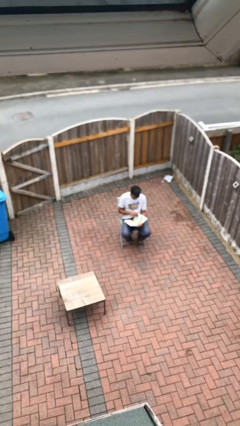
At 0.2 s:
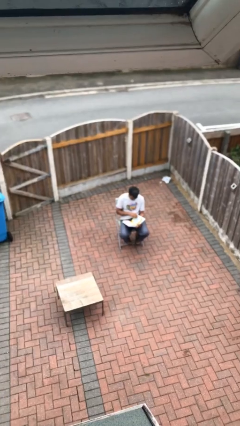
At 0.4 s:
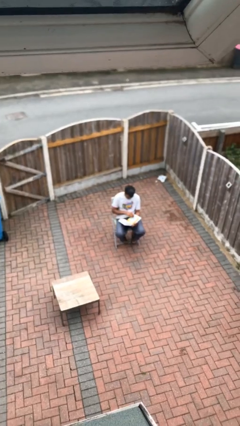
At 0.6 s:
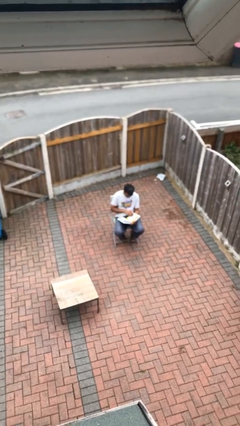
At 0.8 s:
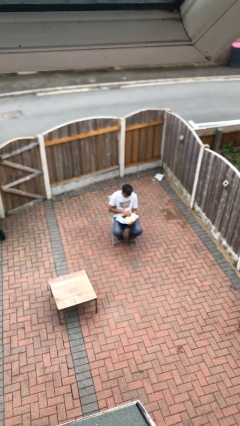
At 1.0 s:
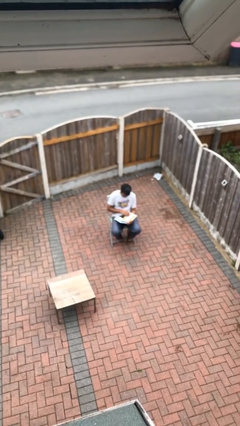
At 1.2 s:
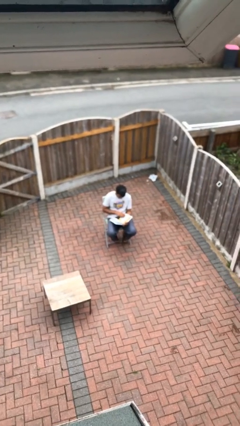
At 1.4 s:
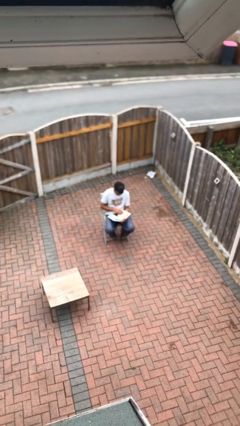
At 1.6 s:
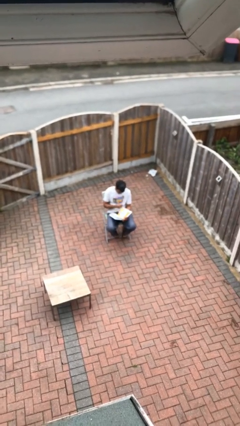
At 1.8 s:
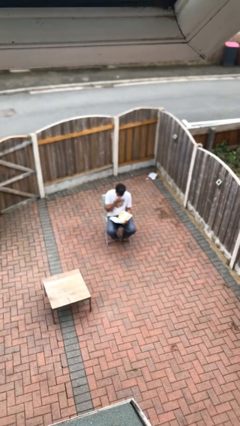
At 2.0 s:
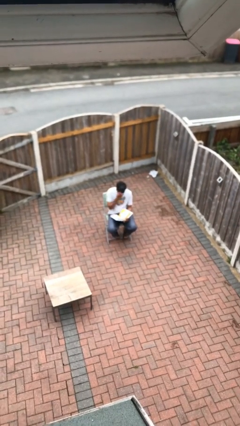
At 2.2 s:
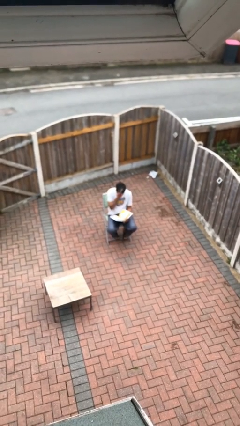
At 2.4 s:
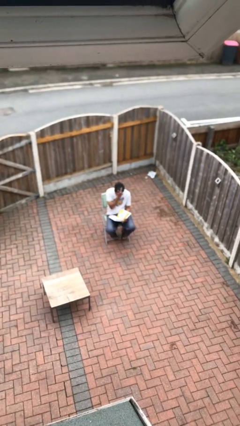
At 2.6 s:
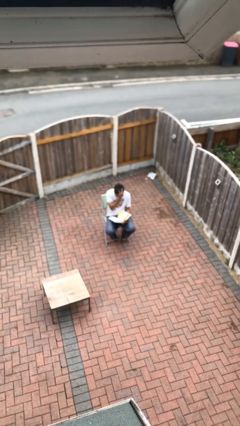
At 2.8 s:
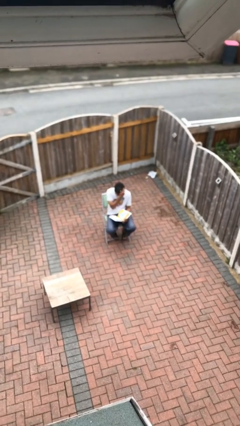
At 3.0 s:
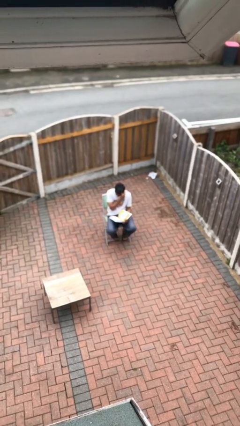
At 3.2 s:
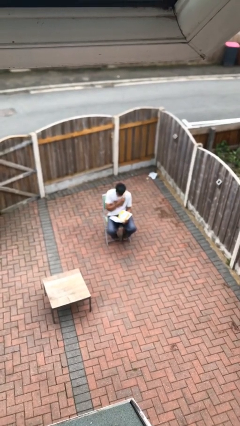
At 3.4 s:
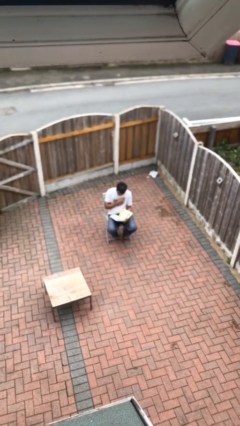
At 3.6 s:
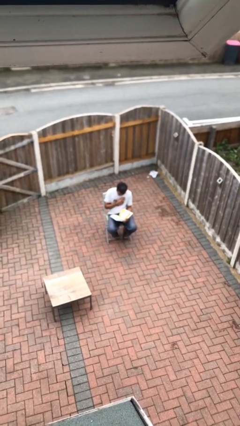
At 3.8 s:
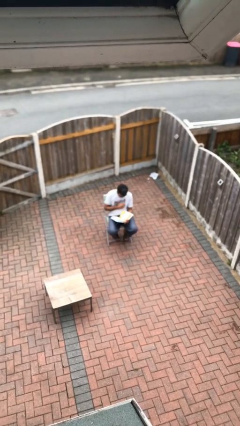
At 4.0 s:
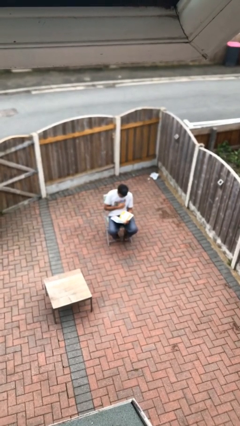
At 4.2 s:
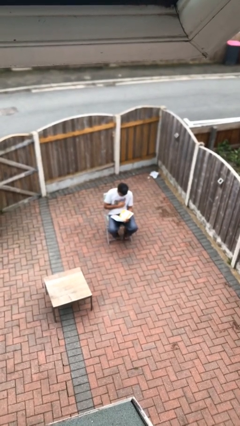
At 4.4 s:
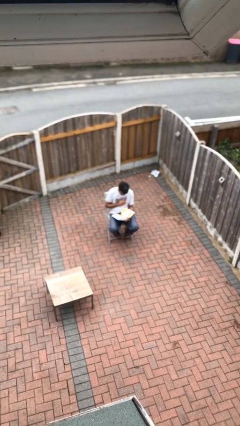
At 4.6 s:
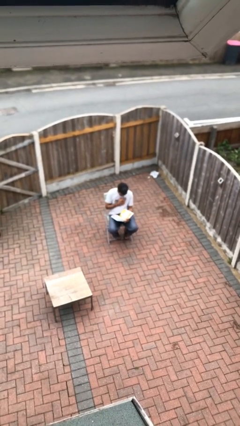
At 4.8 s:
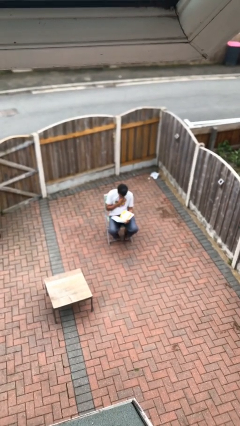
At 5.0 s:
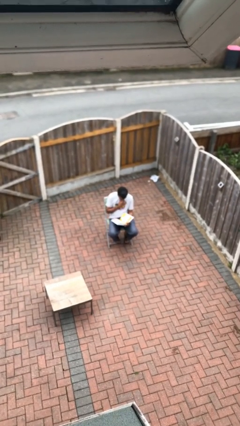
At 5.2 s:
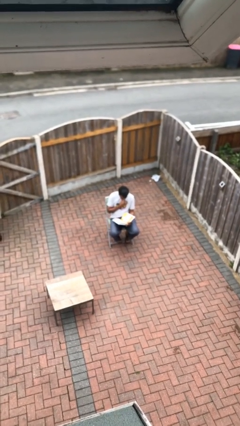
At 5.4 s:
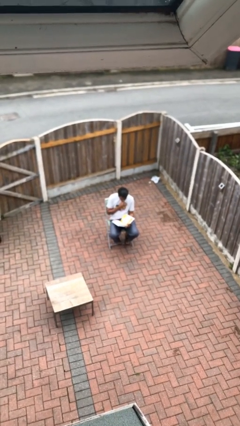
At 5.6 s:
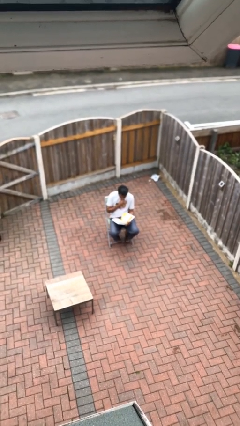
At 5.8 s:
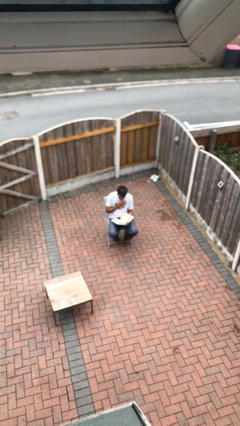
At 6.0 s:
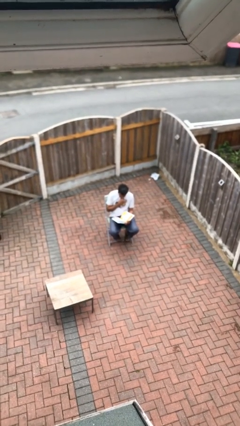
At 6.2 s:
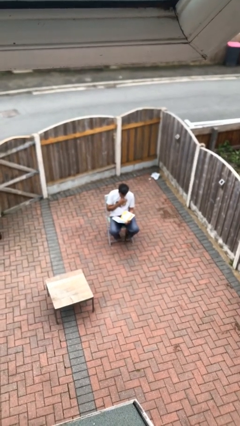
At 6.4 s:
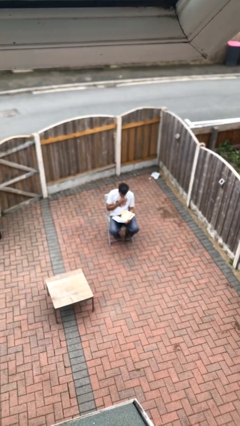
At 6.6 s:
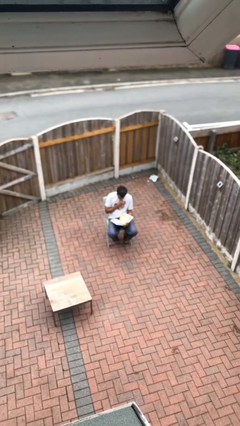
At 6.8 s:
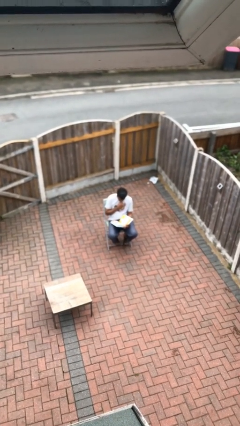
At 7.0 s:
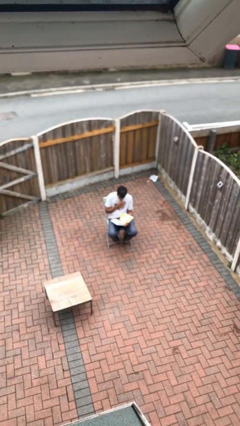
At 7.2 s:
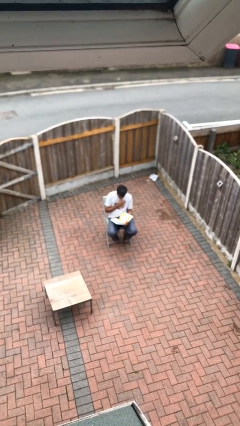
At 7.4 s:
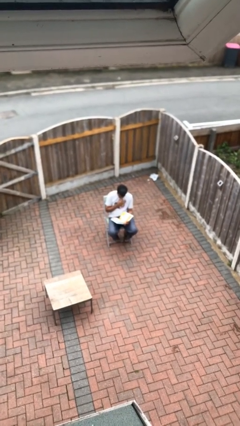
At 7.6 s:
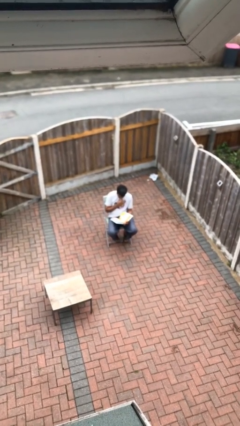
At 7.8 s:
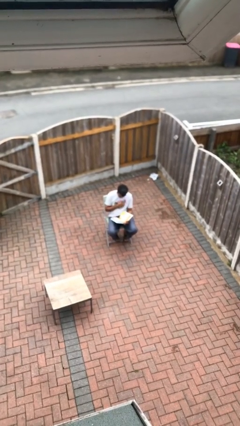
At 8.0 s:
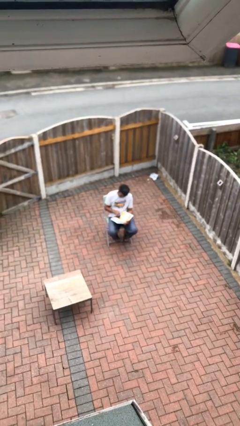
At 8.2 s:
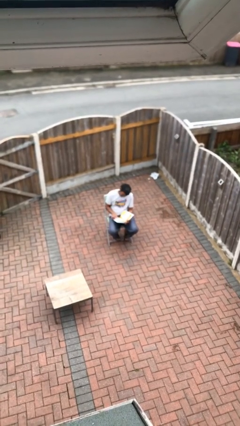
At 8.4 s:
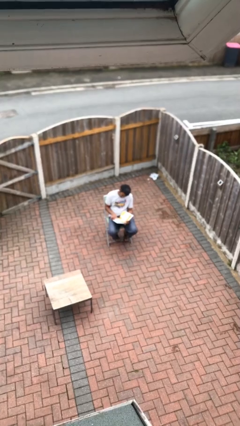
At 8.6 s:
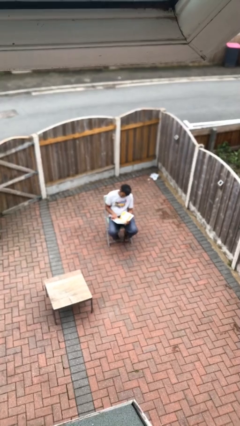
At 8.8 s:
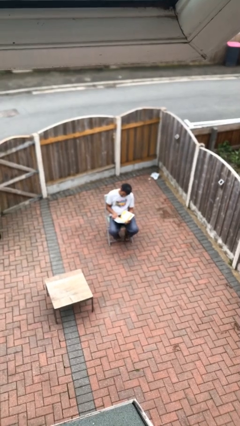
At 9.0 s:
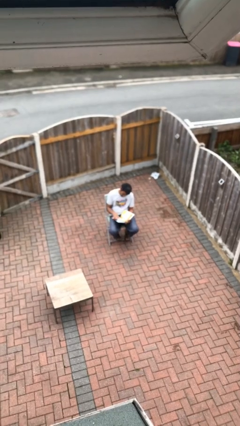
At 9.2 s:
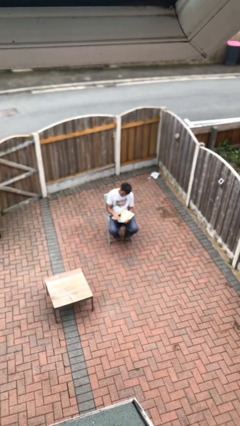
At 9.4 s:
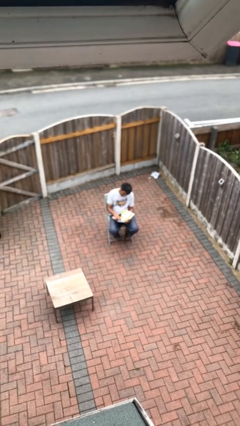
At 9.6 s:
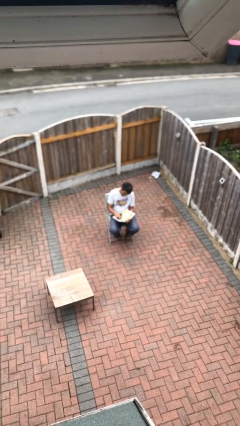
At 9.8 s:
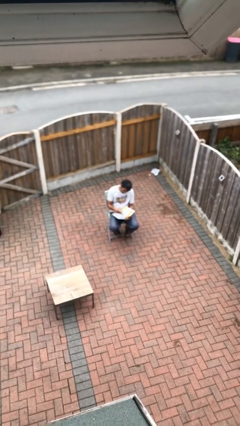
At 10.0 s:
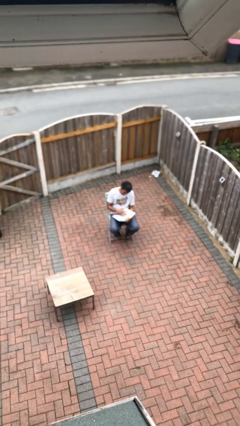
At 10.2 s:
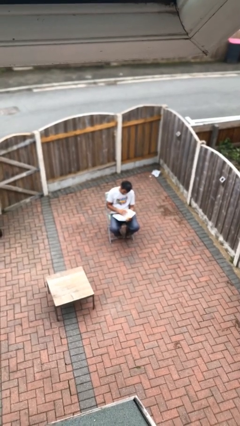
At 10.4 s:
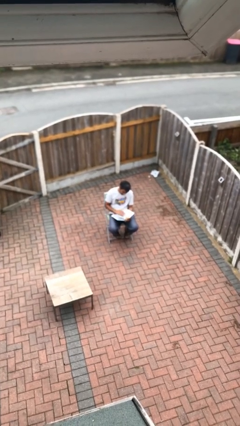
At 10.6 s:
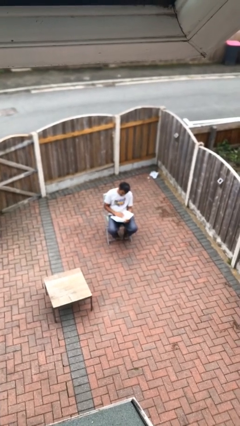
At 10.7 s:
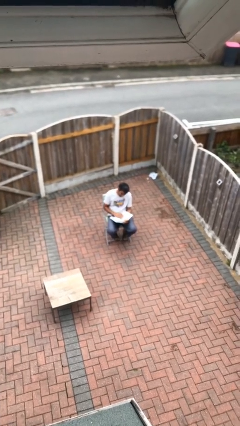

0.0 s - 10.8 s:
person reads document

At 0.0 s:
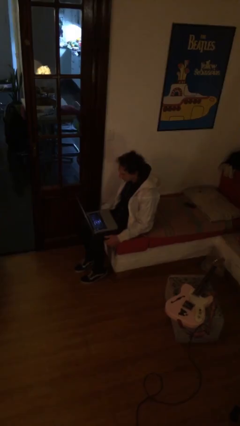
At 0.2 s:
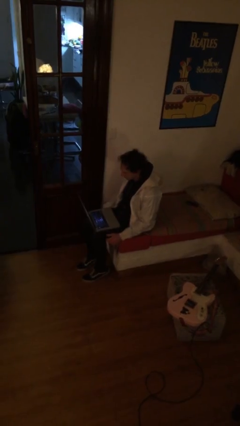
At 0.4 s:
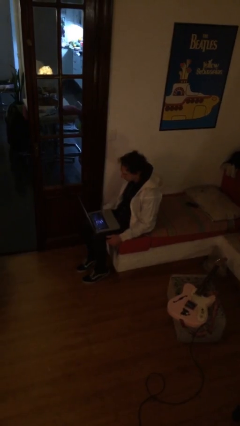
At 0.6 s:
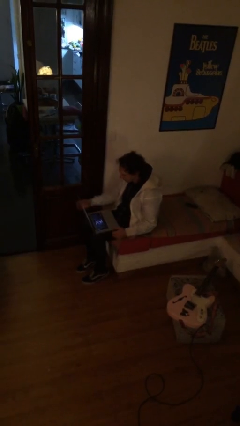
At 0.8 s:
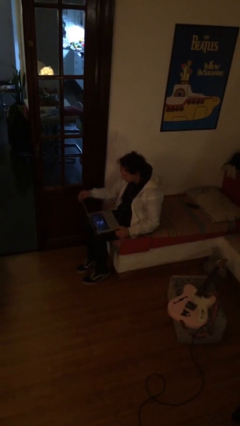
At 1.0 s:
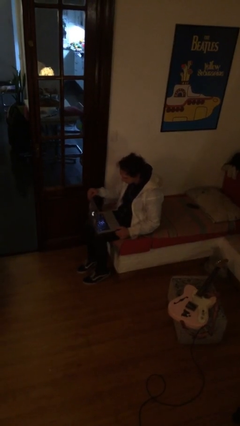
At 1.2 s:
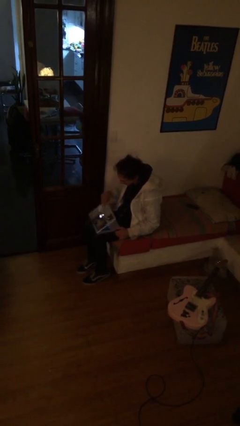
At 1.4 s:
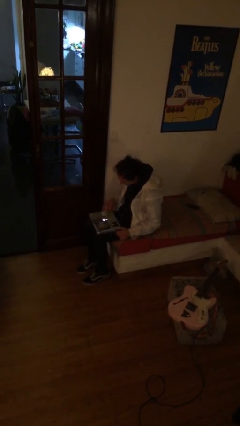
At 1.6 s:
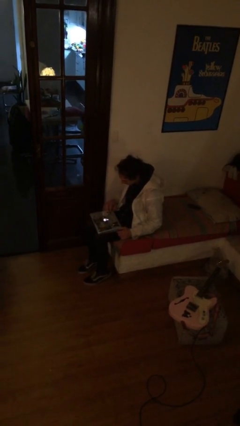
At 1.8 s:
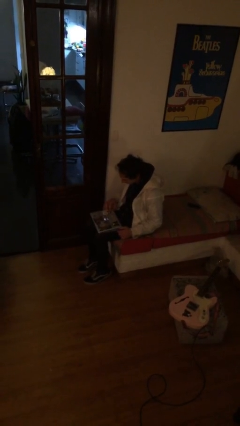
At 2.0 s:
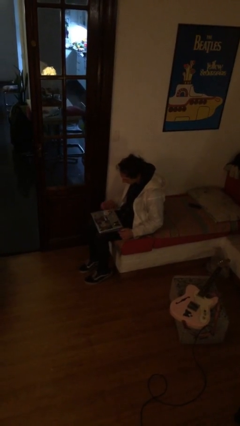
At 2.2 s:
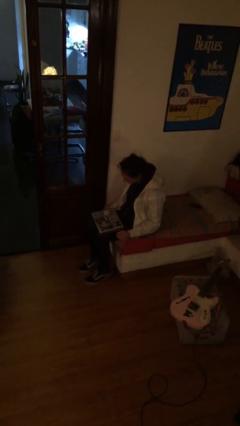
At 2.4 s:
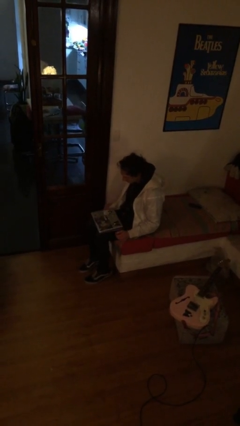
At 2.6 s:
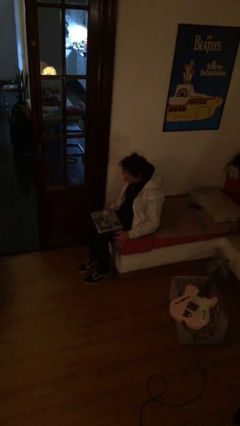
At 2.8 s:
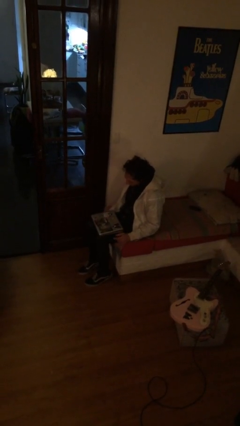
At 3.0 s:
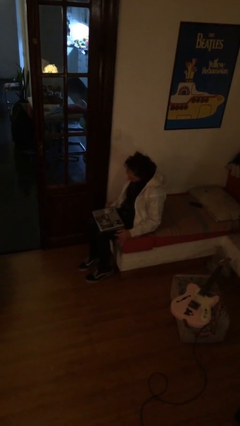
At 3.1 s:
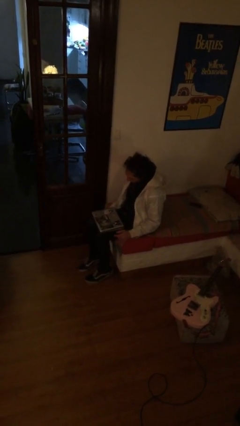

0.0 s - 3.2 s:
person closes laptop

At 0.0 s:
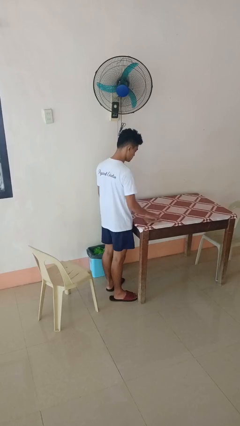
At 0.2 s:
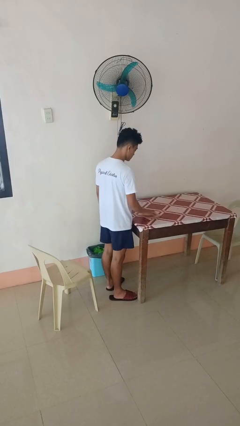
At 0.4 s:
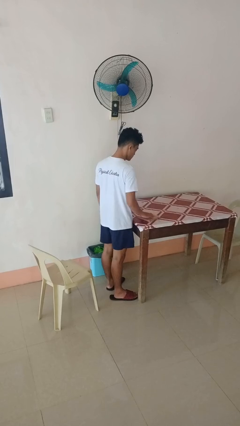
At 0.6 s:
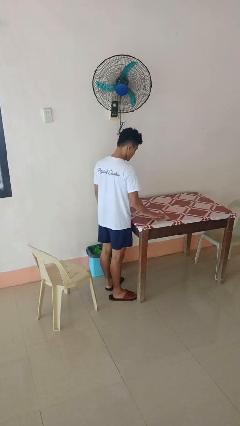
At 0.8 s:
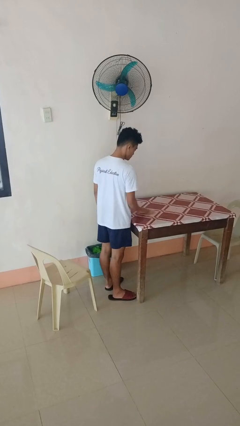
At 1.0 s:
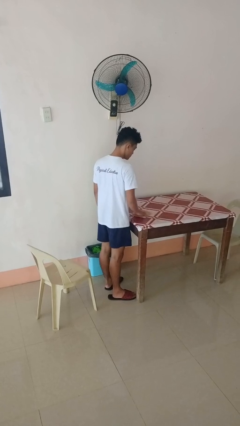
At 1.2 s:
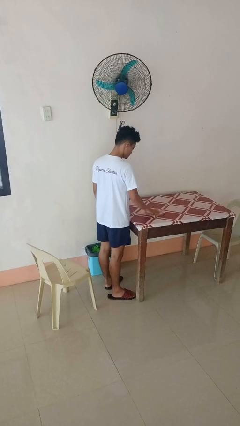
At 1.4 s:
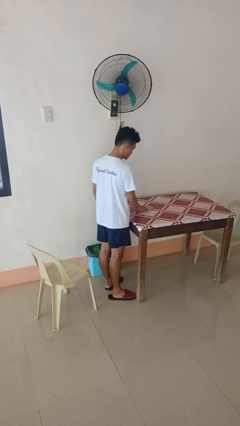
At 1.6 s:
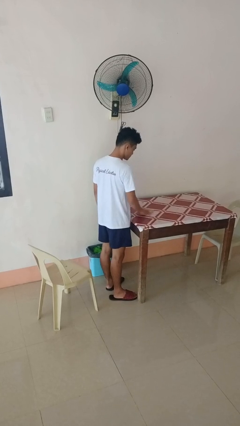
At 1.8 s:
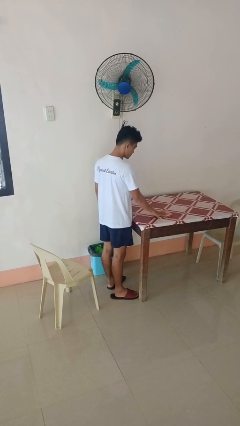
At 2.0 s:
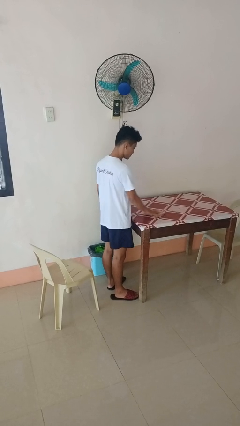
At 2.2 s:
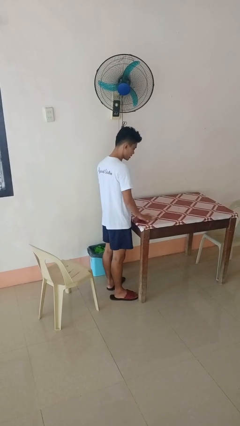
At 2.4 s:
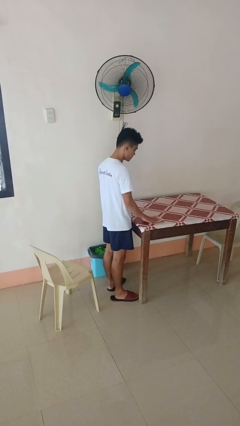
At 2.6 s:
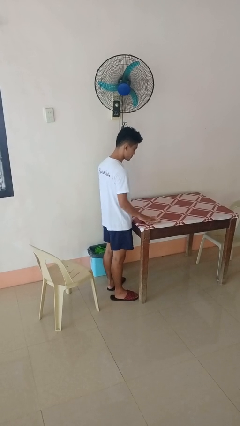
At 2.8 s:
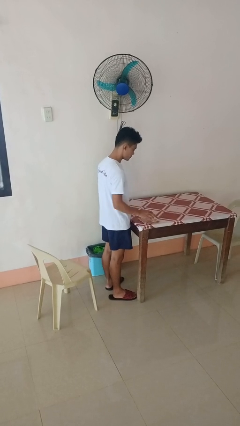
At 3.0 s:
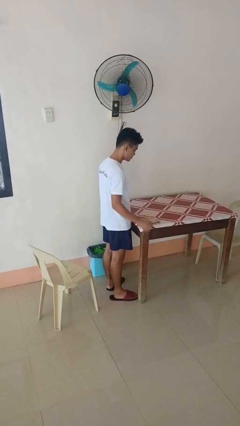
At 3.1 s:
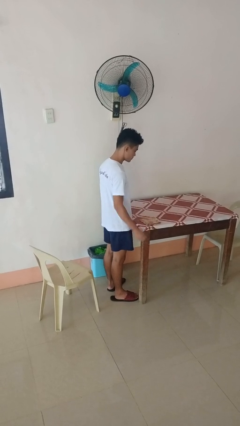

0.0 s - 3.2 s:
person cleans table with rag

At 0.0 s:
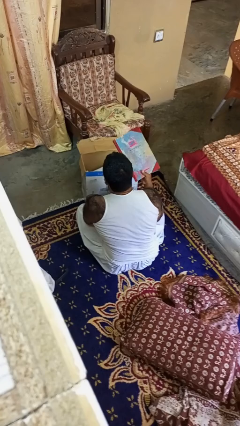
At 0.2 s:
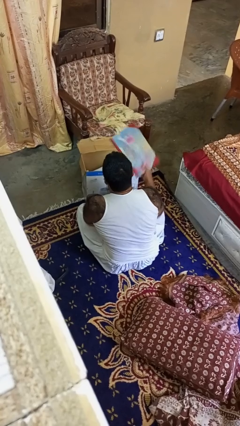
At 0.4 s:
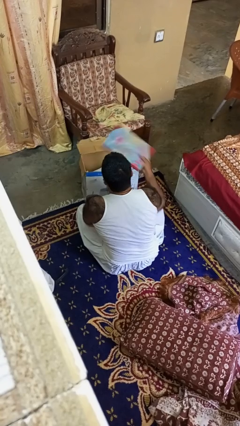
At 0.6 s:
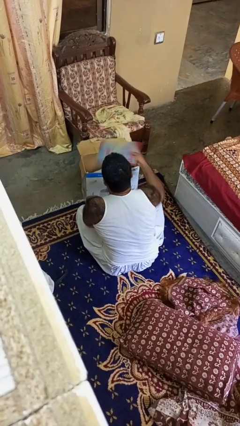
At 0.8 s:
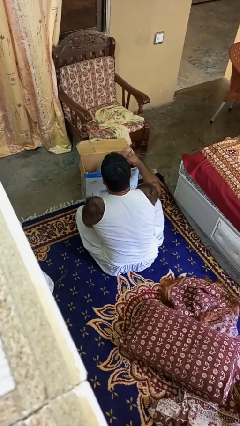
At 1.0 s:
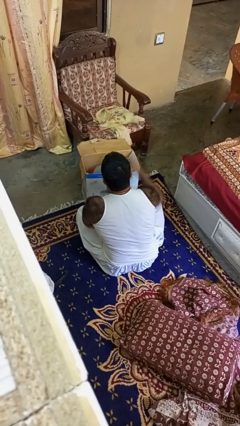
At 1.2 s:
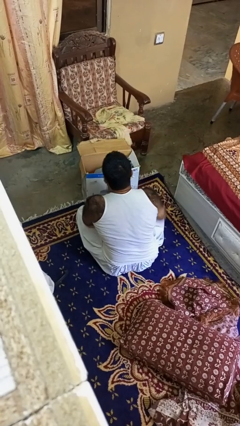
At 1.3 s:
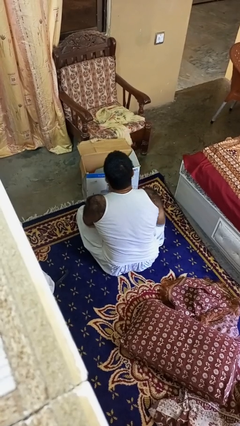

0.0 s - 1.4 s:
person puts object into box
